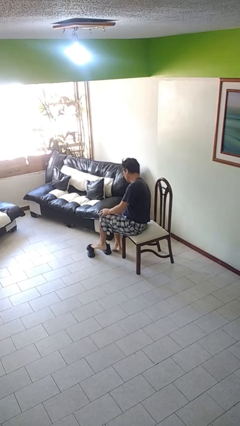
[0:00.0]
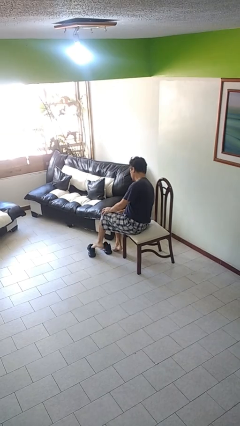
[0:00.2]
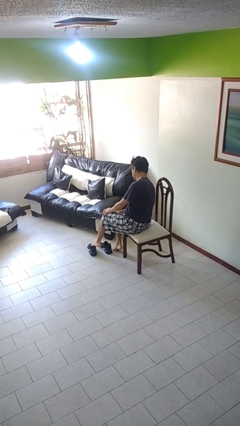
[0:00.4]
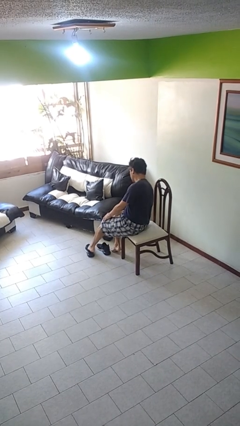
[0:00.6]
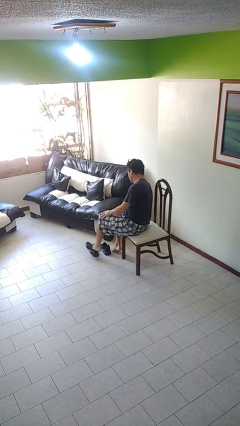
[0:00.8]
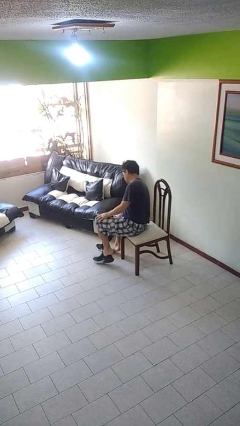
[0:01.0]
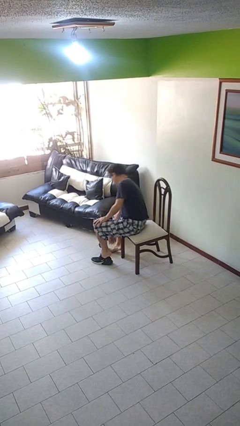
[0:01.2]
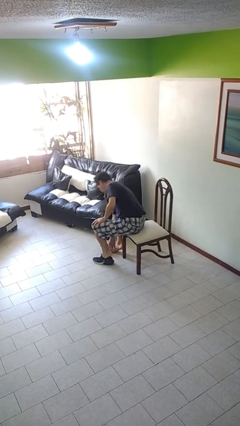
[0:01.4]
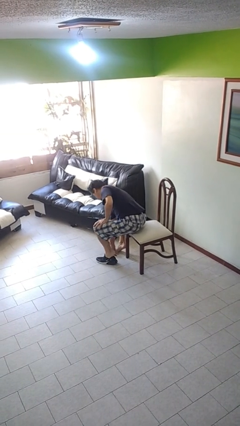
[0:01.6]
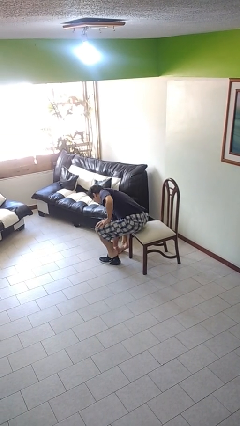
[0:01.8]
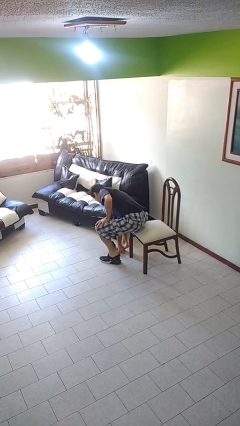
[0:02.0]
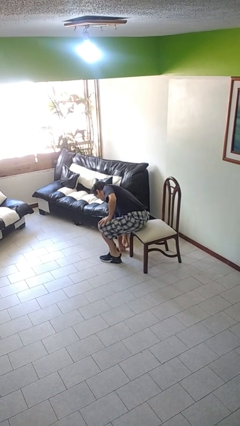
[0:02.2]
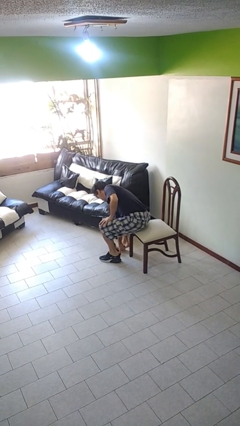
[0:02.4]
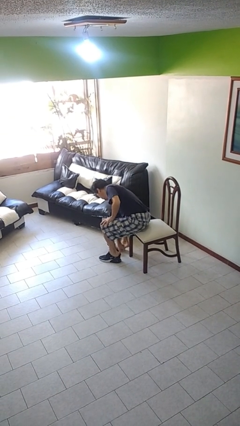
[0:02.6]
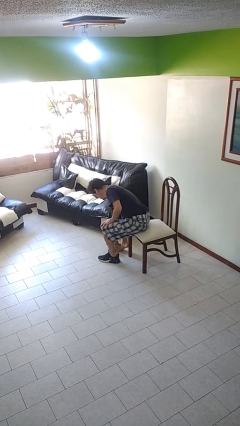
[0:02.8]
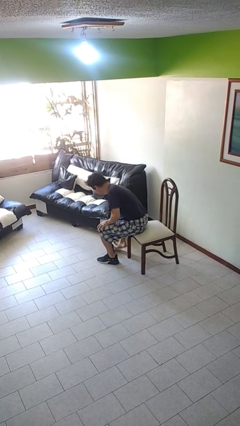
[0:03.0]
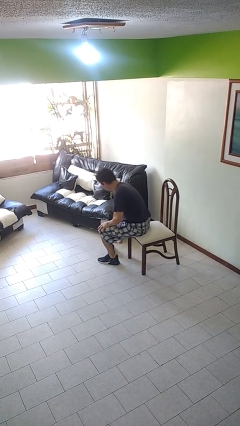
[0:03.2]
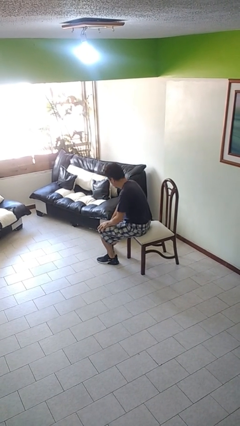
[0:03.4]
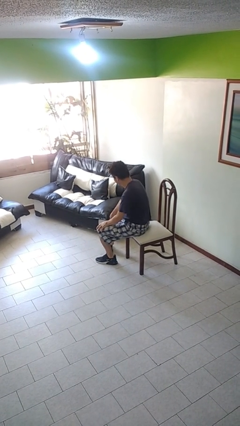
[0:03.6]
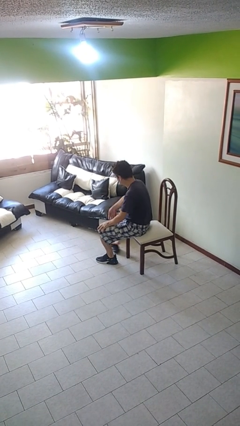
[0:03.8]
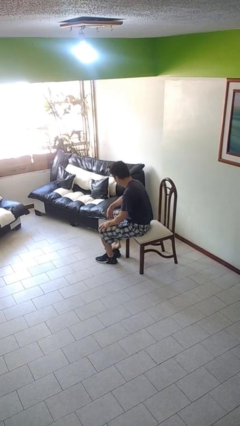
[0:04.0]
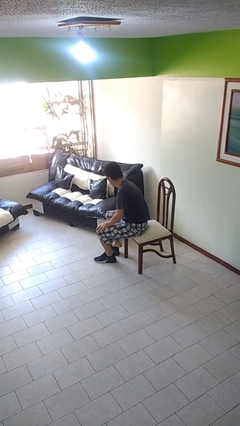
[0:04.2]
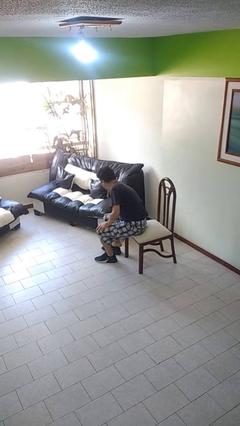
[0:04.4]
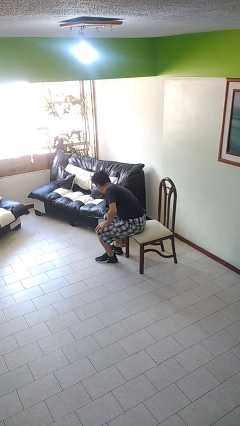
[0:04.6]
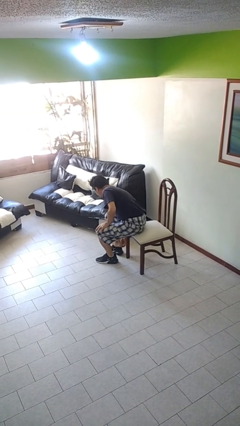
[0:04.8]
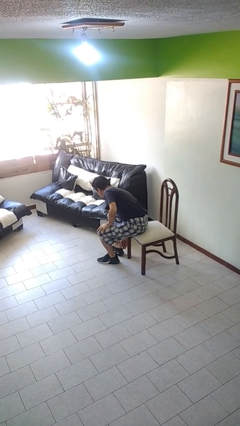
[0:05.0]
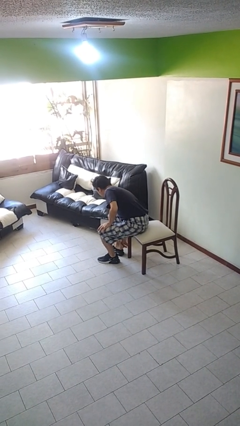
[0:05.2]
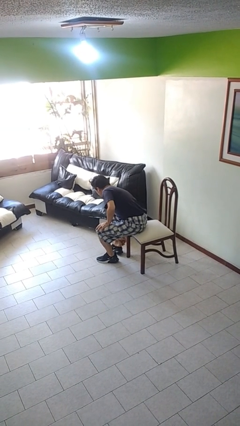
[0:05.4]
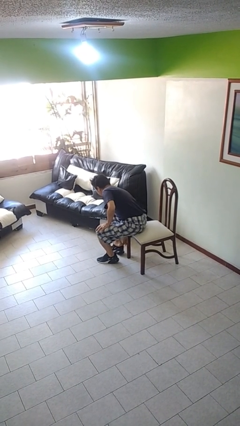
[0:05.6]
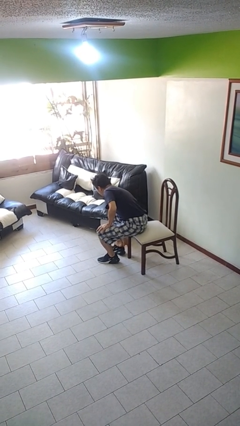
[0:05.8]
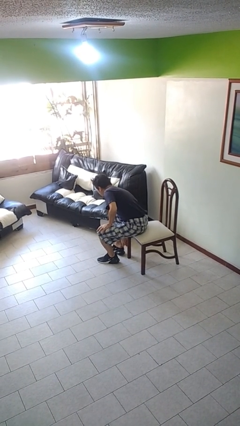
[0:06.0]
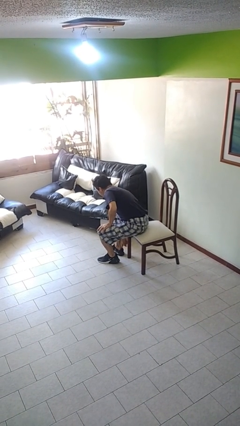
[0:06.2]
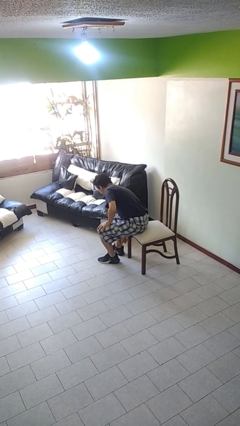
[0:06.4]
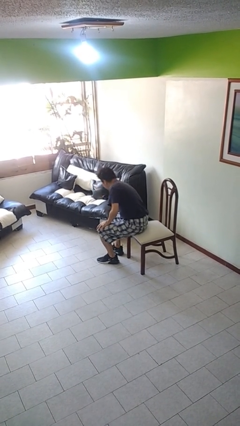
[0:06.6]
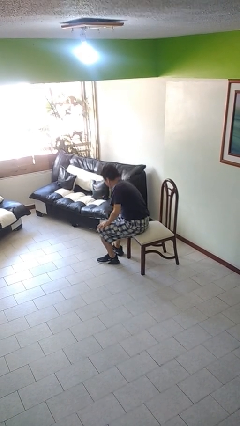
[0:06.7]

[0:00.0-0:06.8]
person puts on shoes

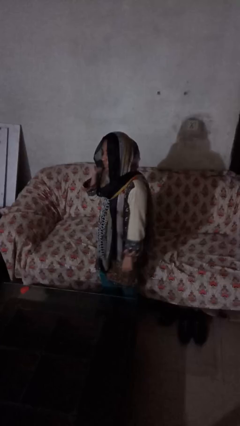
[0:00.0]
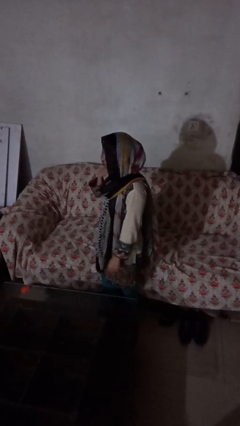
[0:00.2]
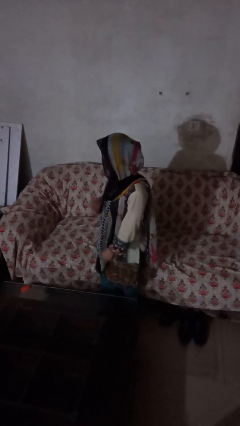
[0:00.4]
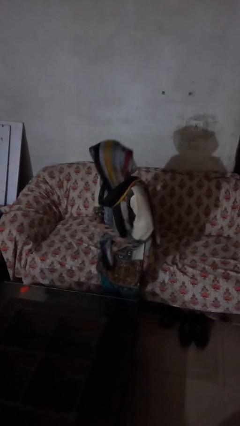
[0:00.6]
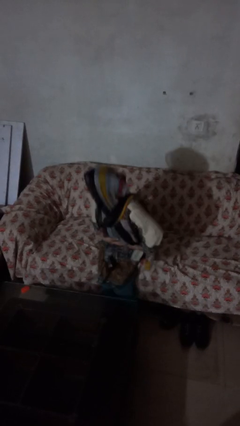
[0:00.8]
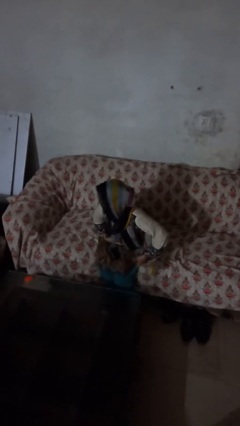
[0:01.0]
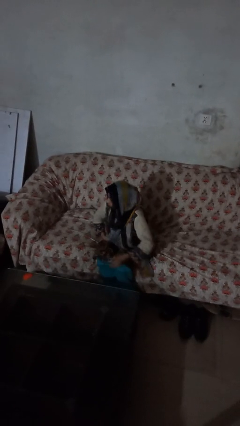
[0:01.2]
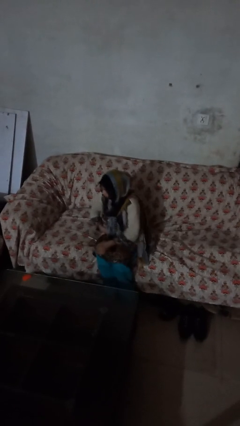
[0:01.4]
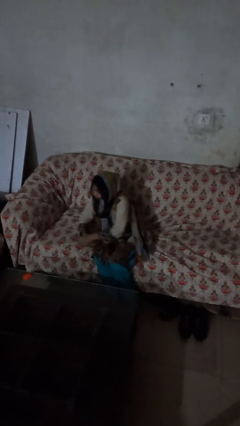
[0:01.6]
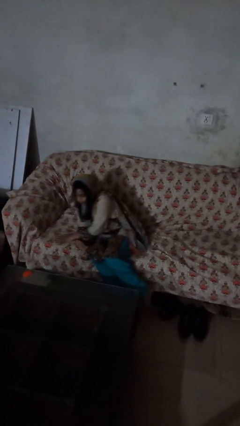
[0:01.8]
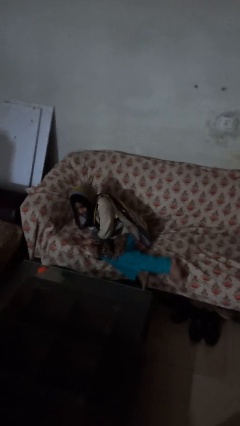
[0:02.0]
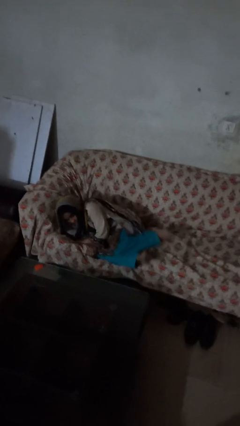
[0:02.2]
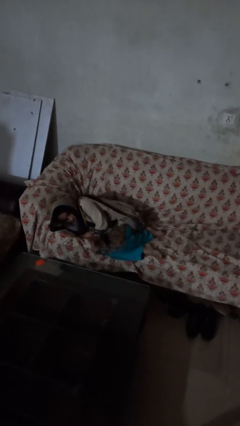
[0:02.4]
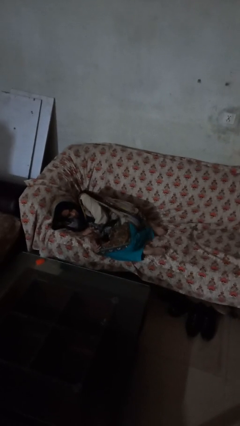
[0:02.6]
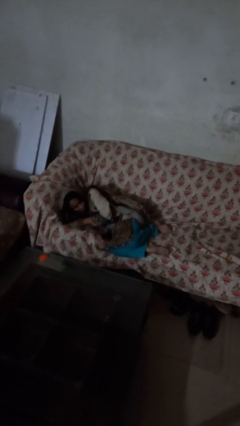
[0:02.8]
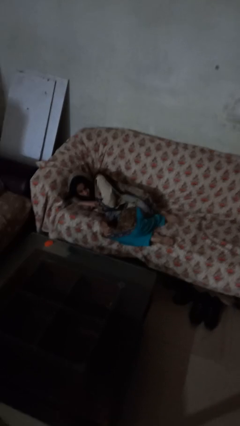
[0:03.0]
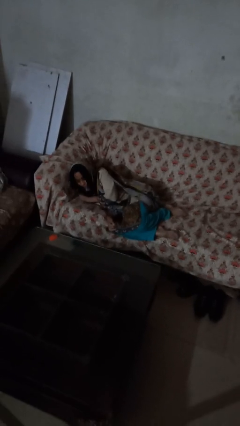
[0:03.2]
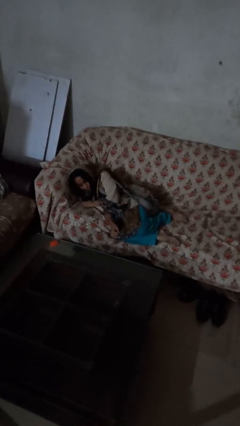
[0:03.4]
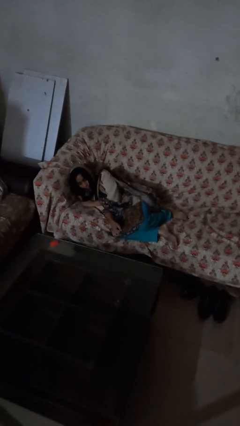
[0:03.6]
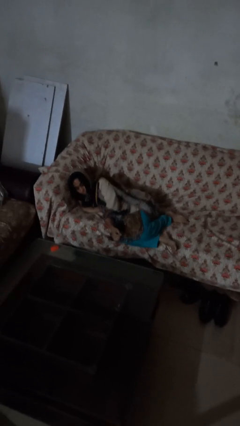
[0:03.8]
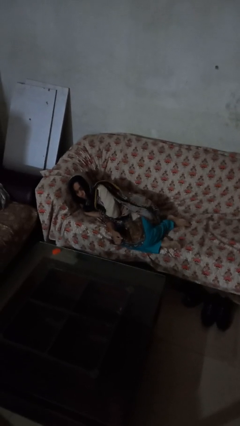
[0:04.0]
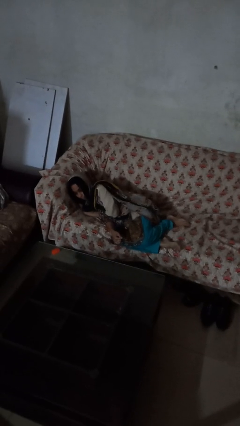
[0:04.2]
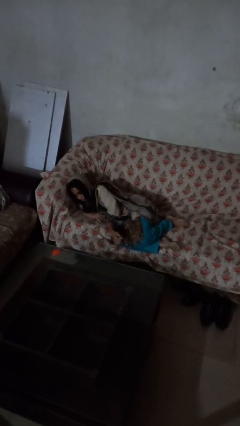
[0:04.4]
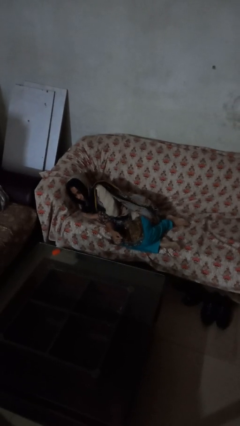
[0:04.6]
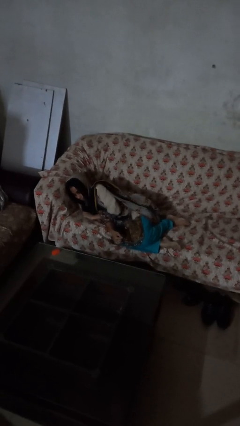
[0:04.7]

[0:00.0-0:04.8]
person lies down on couch

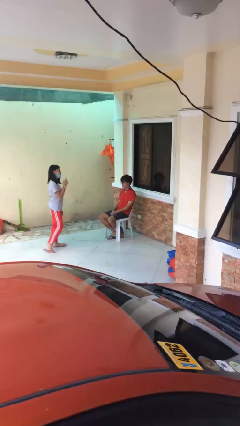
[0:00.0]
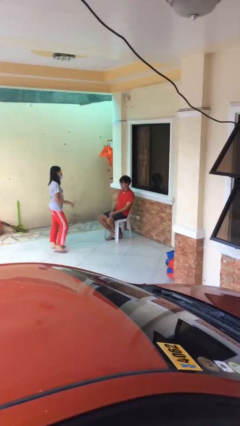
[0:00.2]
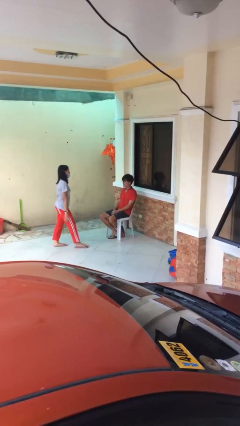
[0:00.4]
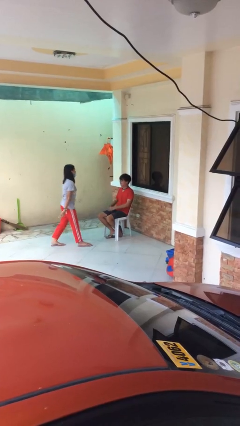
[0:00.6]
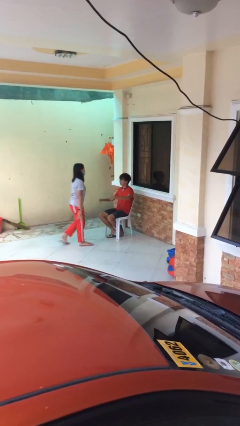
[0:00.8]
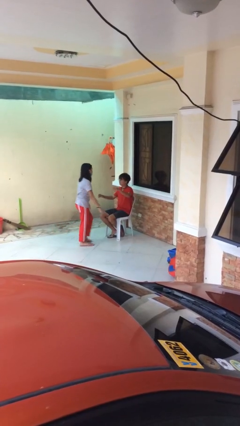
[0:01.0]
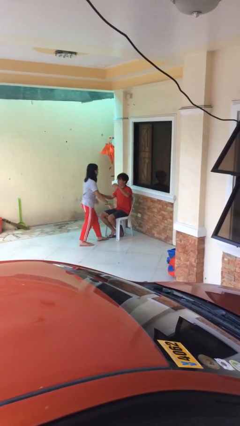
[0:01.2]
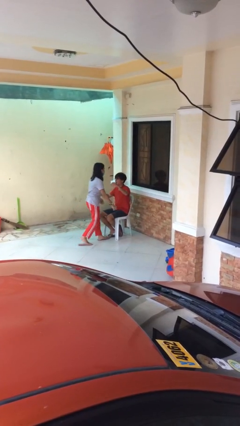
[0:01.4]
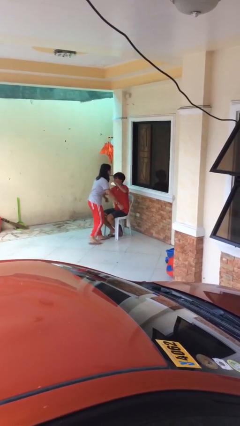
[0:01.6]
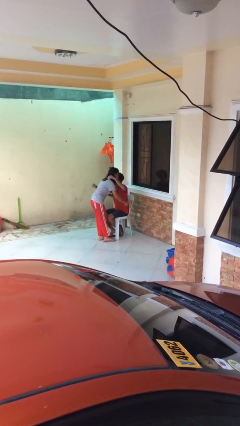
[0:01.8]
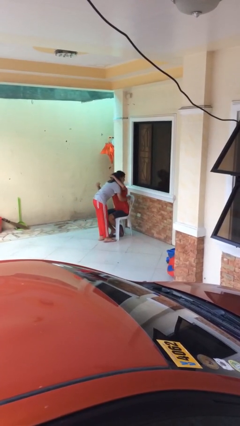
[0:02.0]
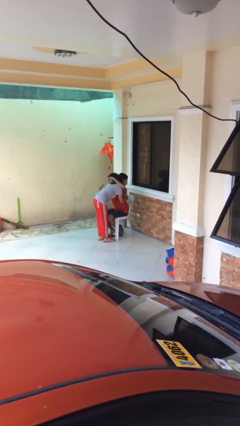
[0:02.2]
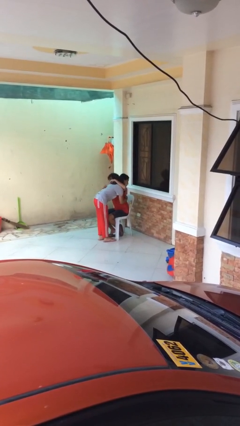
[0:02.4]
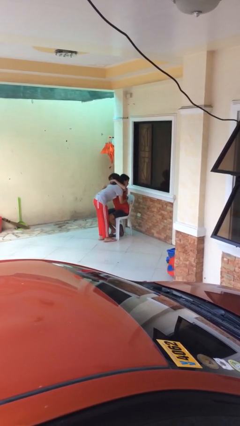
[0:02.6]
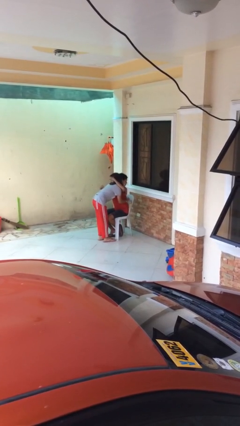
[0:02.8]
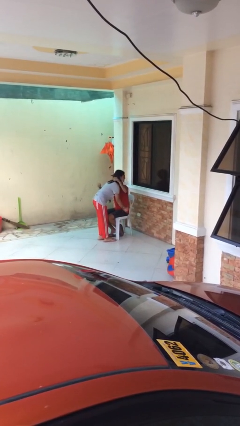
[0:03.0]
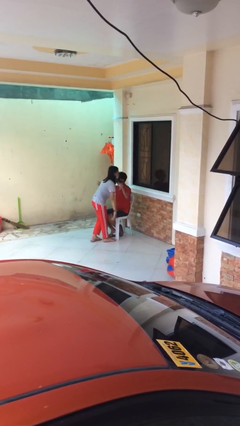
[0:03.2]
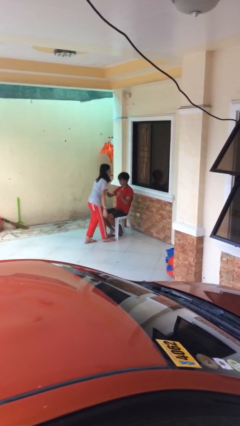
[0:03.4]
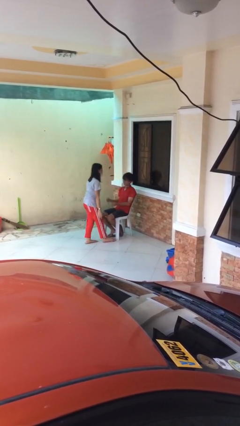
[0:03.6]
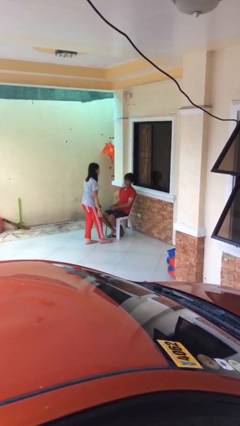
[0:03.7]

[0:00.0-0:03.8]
person embraces person

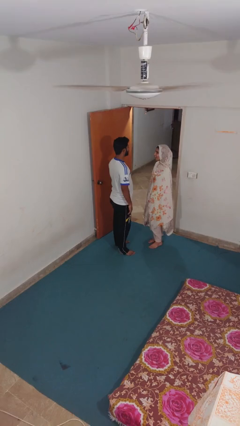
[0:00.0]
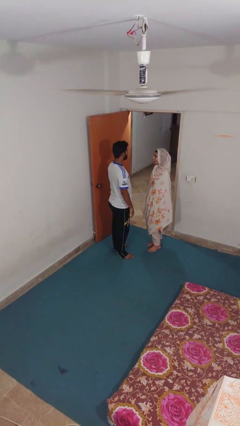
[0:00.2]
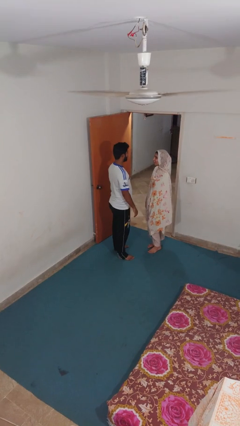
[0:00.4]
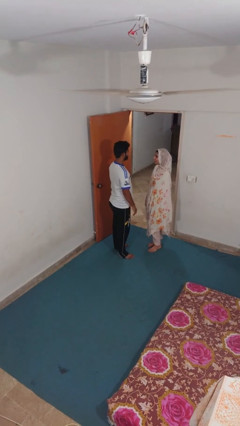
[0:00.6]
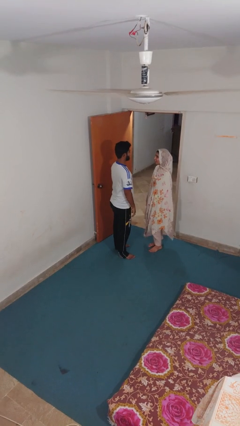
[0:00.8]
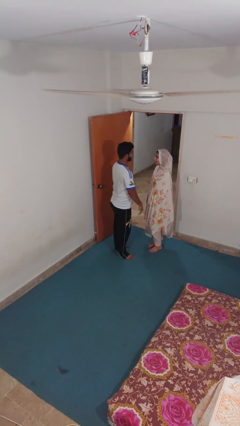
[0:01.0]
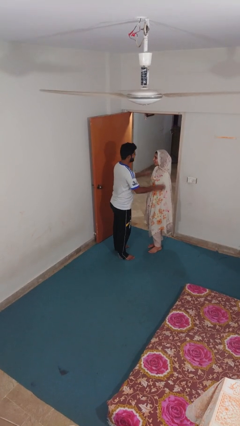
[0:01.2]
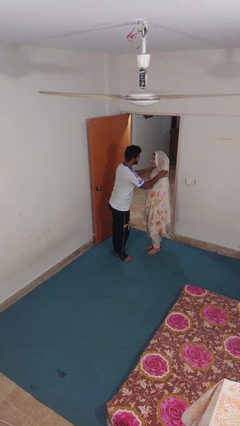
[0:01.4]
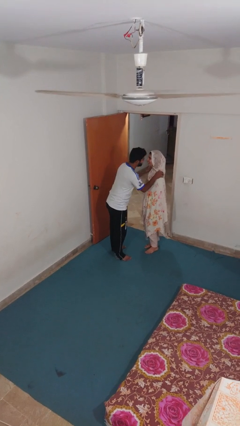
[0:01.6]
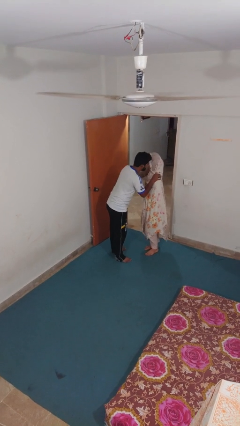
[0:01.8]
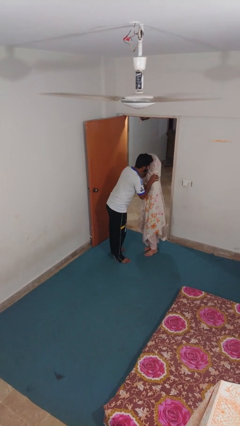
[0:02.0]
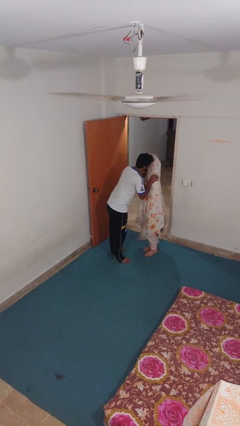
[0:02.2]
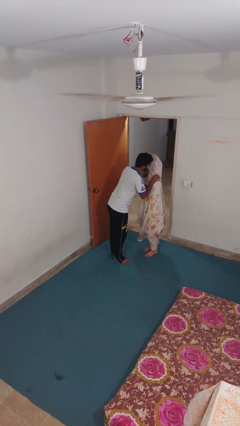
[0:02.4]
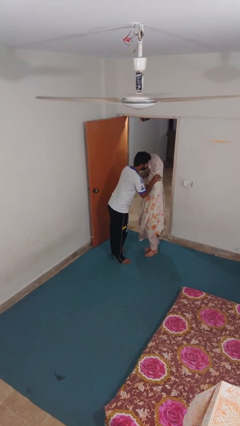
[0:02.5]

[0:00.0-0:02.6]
person kisses cheek of person
